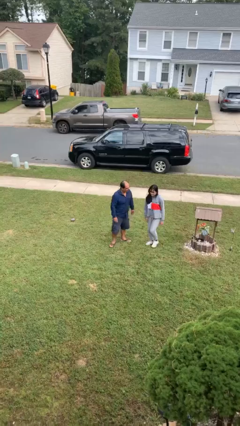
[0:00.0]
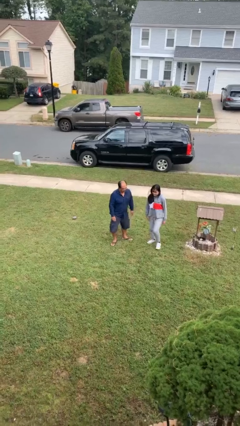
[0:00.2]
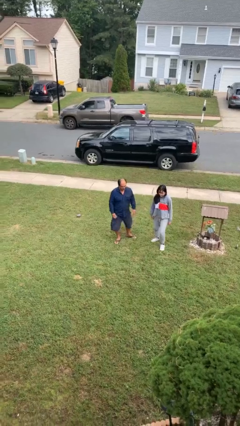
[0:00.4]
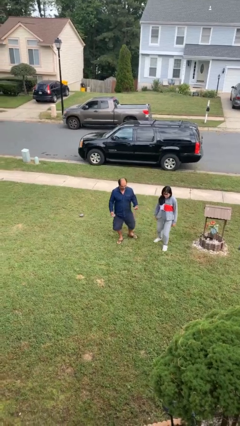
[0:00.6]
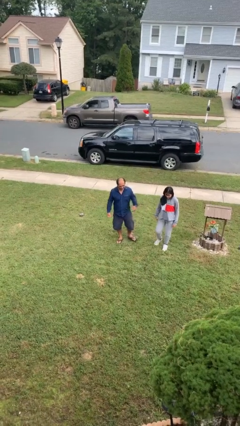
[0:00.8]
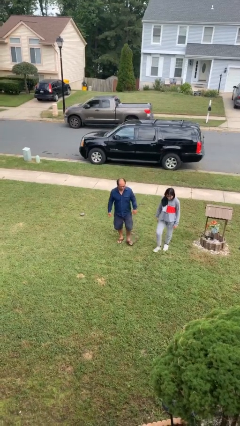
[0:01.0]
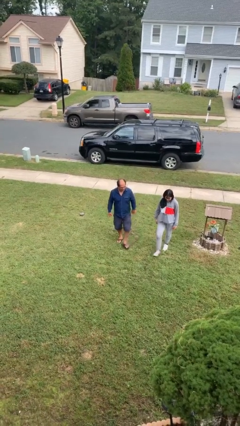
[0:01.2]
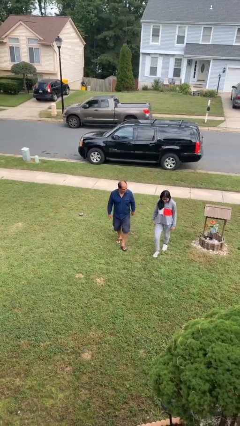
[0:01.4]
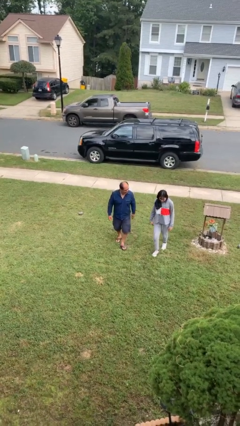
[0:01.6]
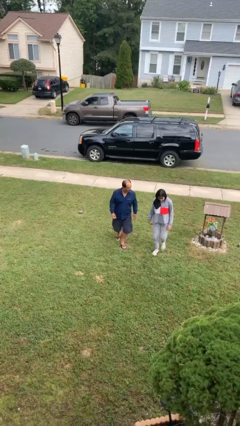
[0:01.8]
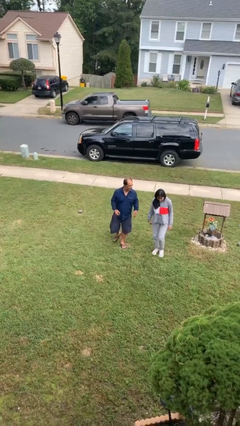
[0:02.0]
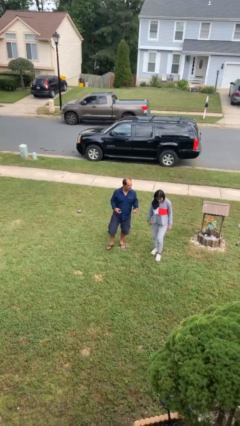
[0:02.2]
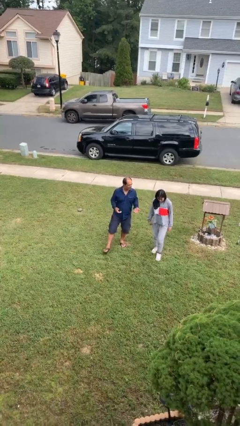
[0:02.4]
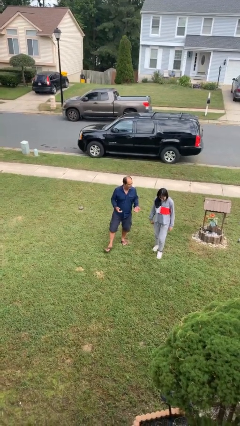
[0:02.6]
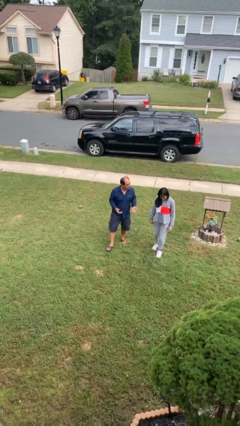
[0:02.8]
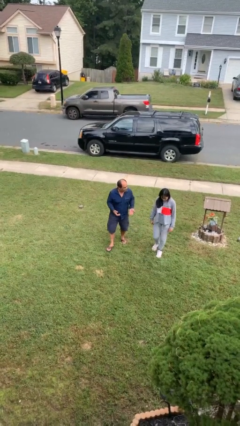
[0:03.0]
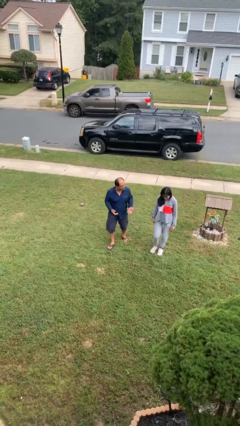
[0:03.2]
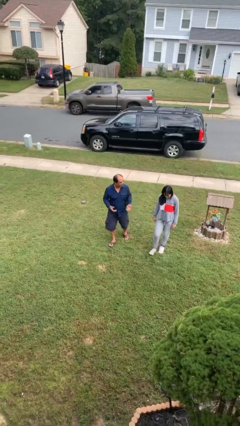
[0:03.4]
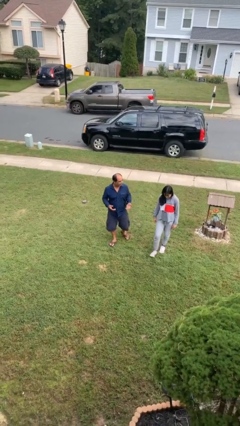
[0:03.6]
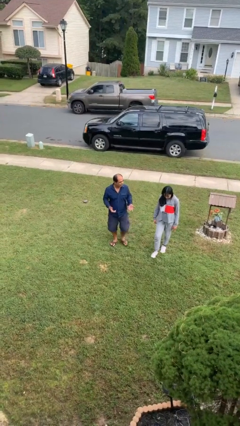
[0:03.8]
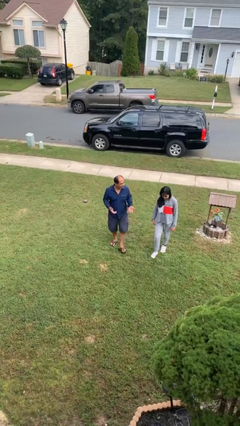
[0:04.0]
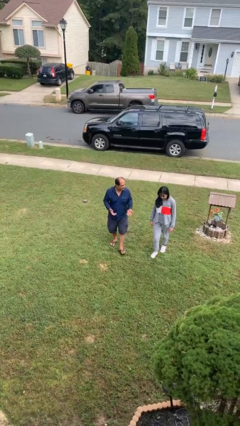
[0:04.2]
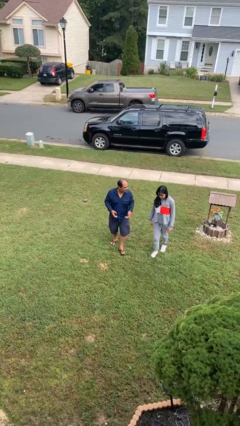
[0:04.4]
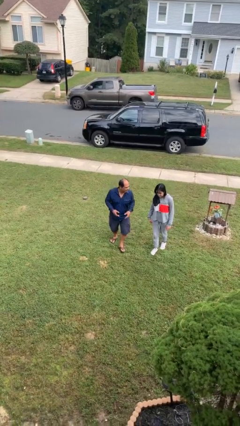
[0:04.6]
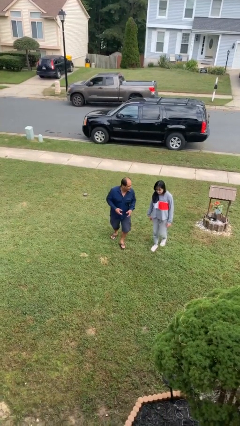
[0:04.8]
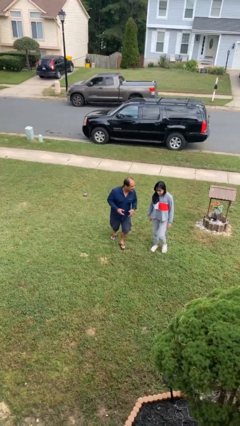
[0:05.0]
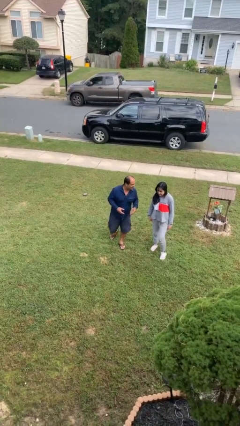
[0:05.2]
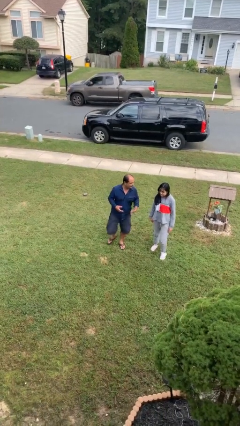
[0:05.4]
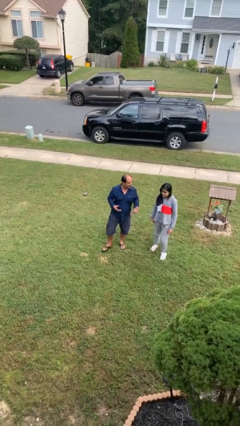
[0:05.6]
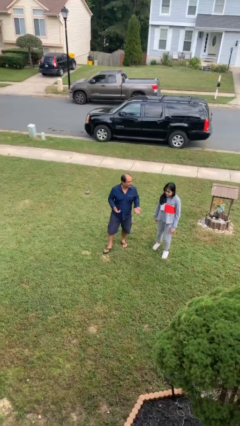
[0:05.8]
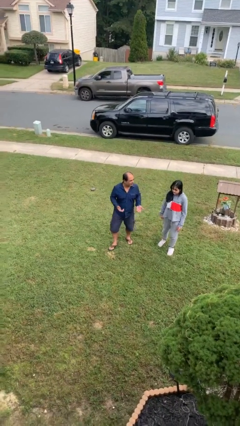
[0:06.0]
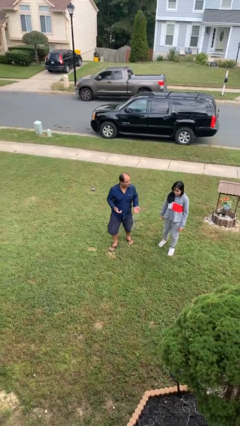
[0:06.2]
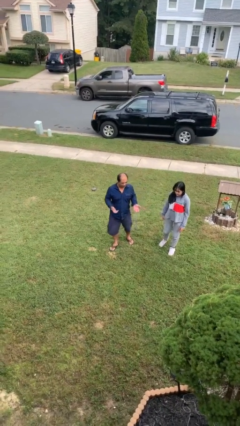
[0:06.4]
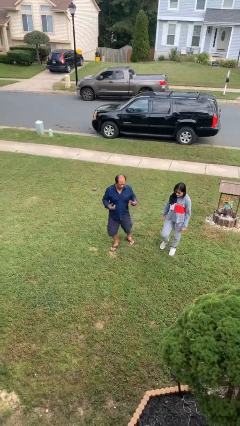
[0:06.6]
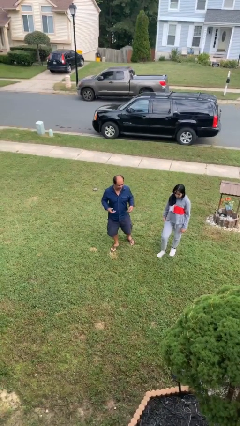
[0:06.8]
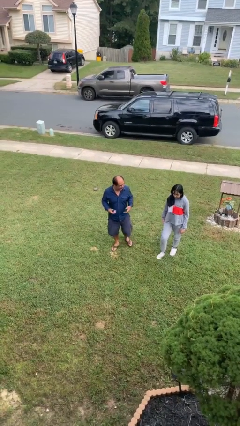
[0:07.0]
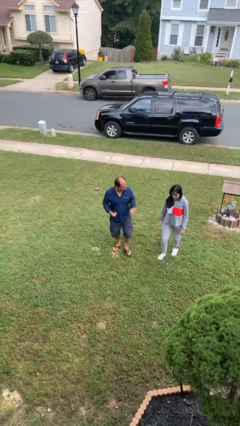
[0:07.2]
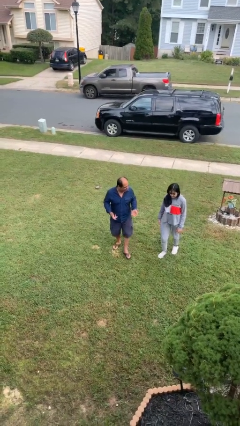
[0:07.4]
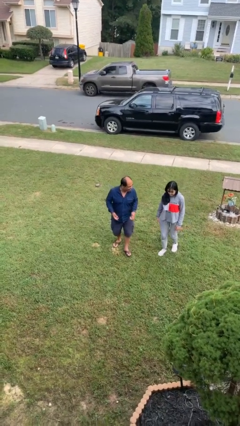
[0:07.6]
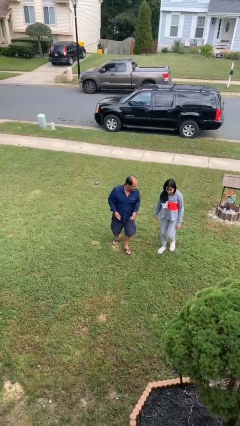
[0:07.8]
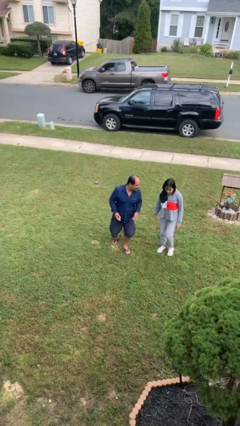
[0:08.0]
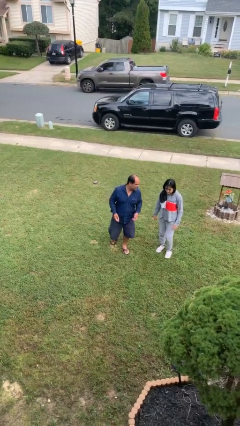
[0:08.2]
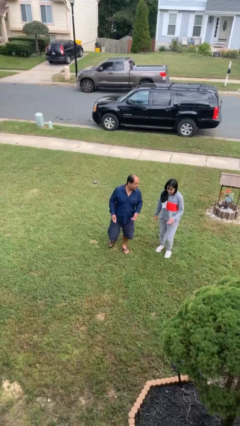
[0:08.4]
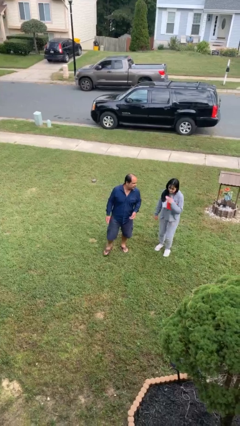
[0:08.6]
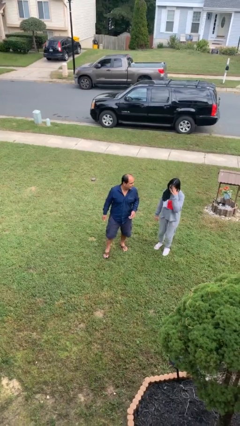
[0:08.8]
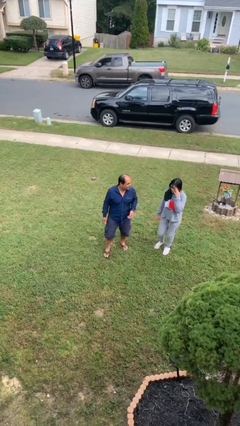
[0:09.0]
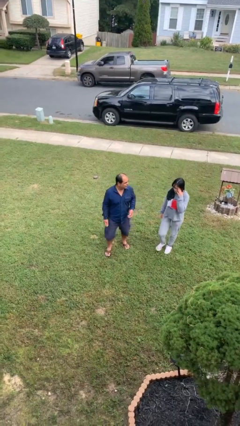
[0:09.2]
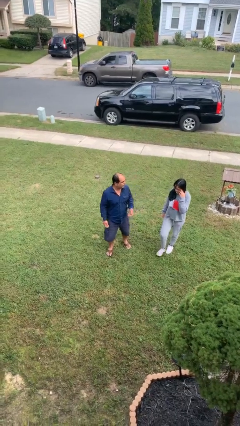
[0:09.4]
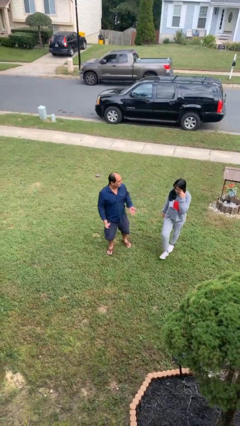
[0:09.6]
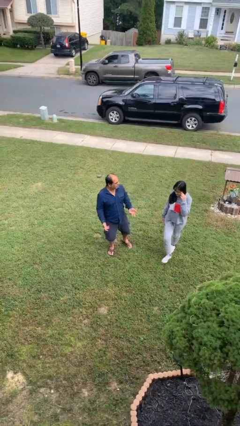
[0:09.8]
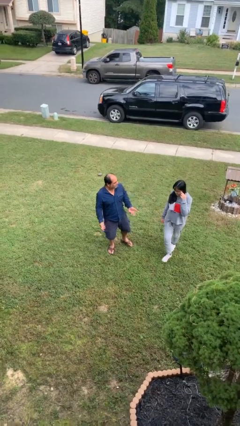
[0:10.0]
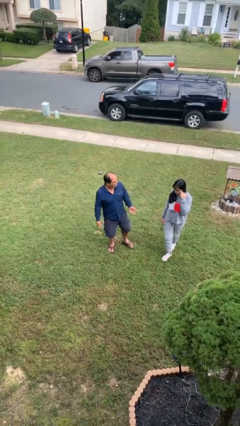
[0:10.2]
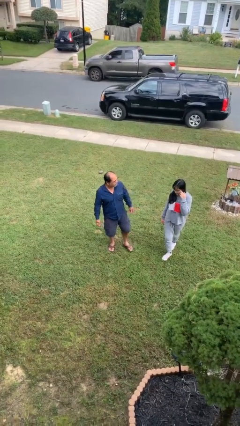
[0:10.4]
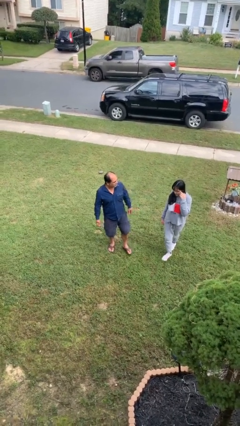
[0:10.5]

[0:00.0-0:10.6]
person talks to person

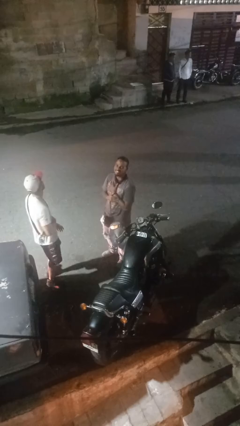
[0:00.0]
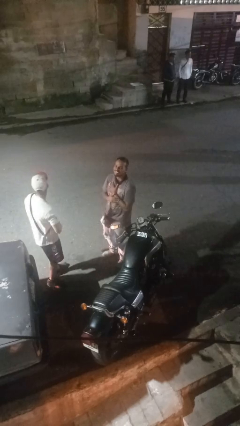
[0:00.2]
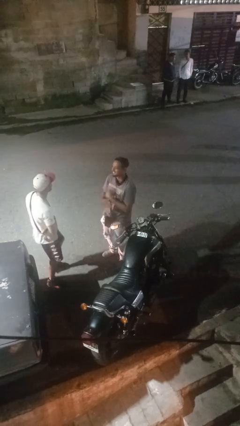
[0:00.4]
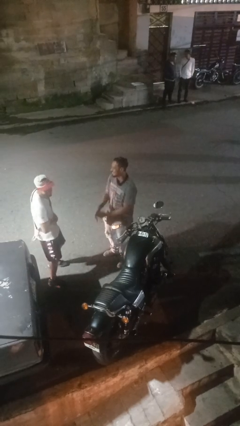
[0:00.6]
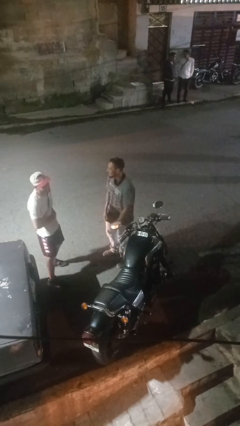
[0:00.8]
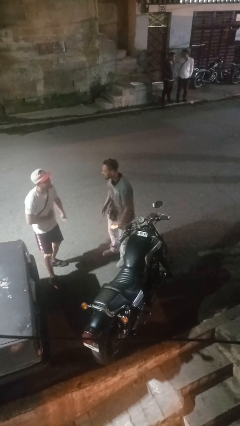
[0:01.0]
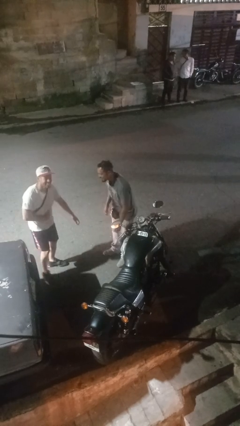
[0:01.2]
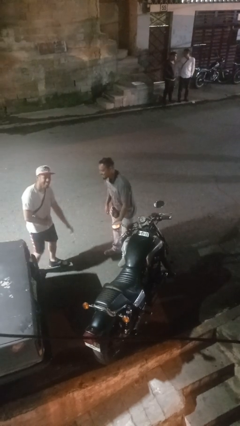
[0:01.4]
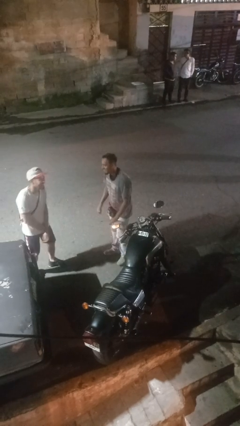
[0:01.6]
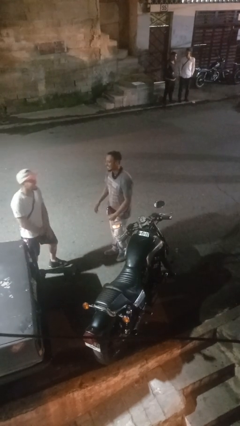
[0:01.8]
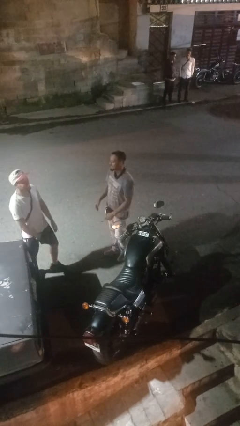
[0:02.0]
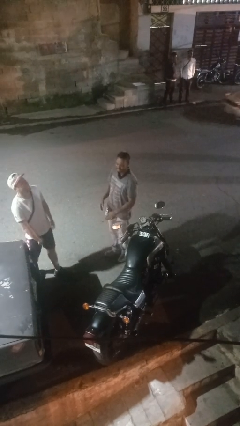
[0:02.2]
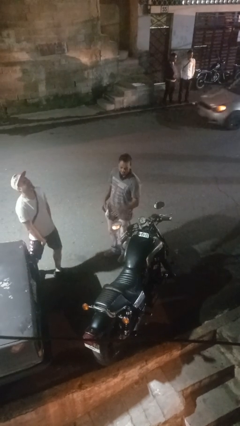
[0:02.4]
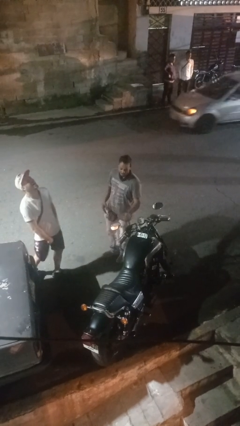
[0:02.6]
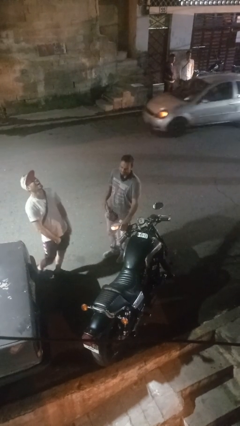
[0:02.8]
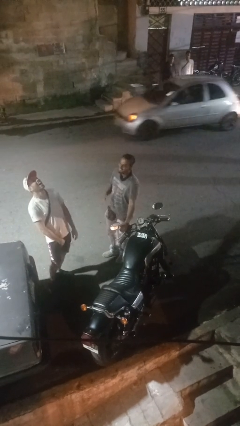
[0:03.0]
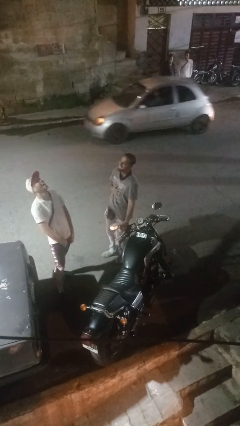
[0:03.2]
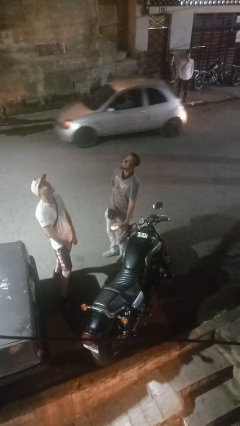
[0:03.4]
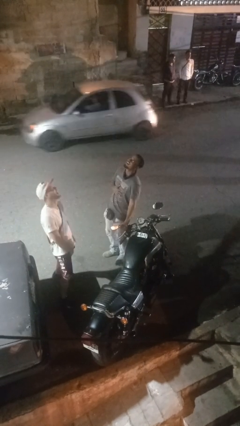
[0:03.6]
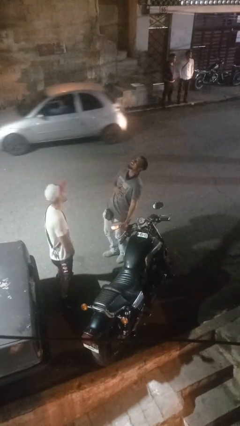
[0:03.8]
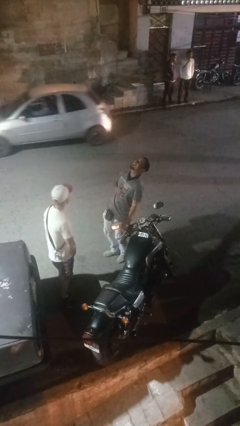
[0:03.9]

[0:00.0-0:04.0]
person laughs with person

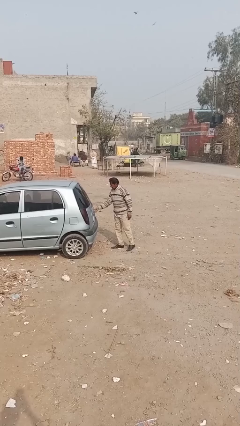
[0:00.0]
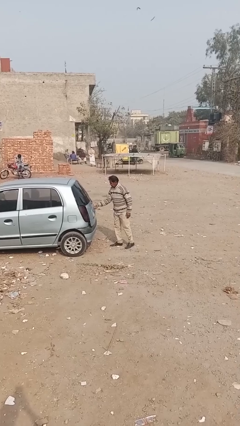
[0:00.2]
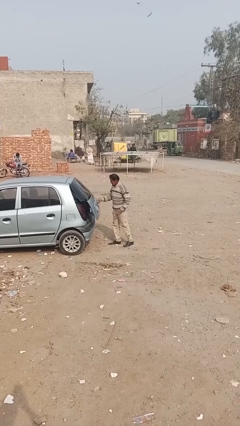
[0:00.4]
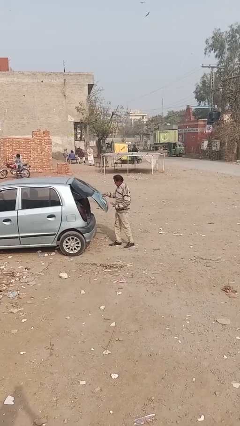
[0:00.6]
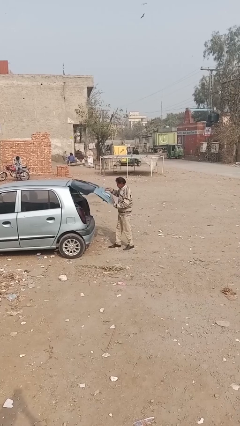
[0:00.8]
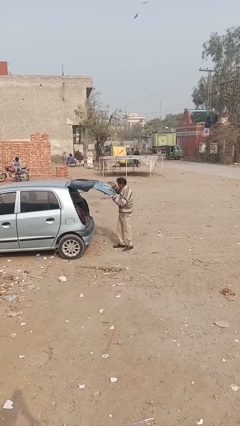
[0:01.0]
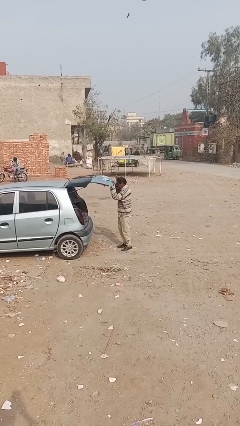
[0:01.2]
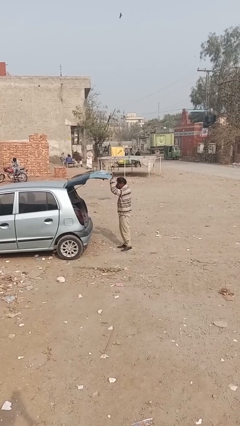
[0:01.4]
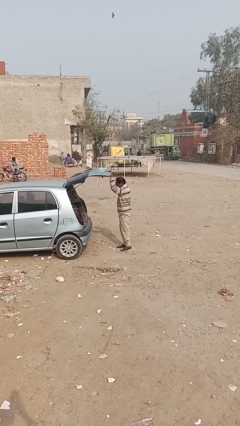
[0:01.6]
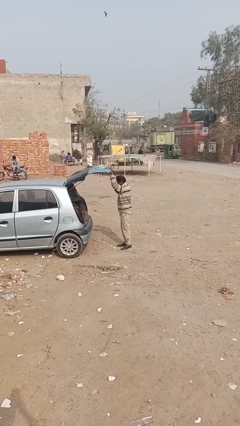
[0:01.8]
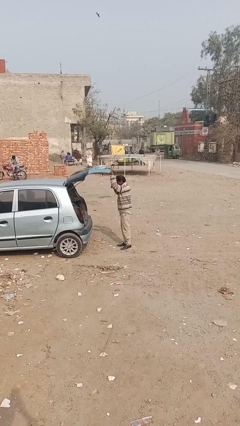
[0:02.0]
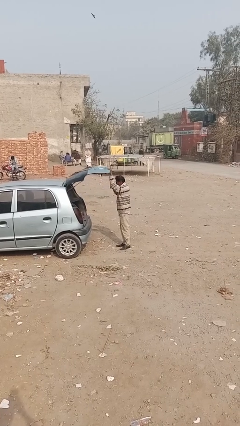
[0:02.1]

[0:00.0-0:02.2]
person opens car trunk

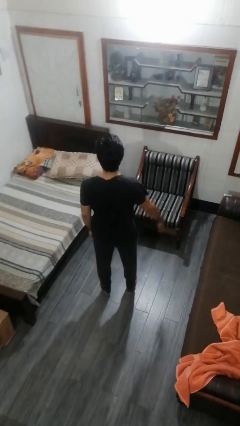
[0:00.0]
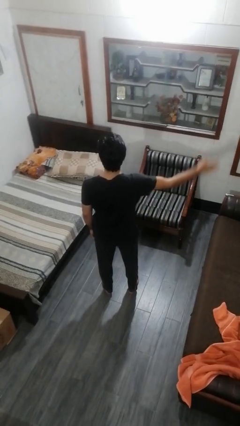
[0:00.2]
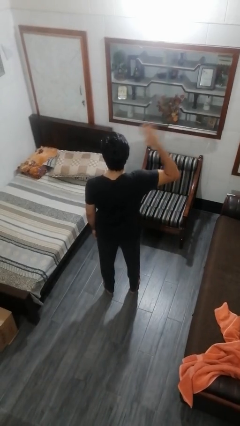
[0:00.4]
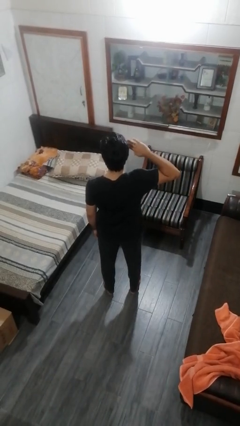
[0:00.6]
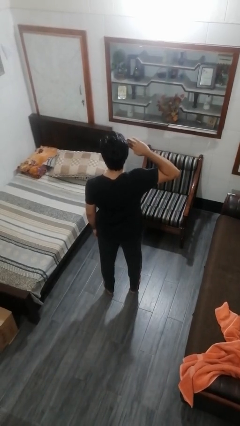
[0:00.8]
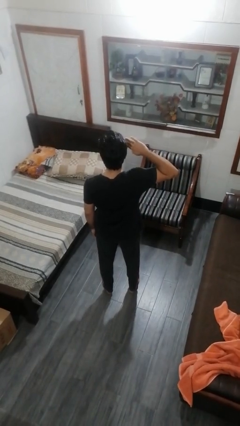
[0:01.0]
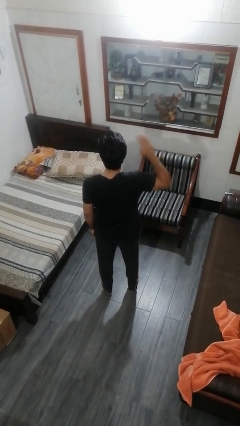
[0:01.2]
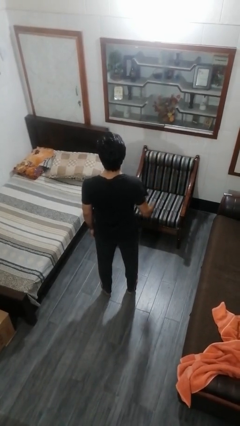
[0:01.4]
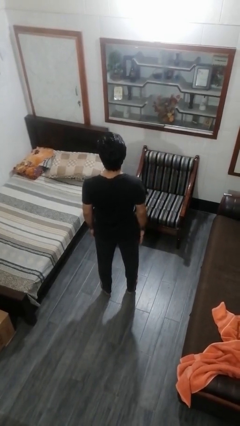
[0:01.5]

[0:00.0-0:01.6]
person salutes
